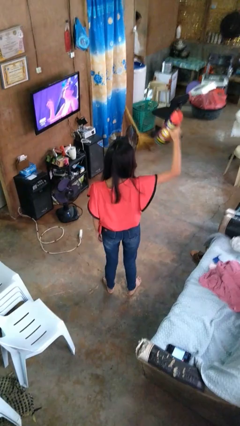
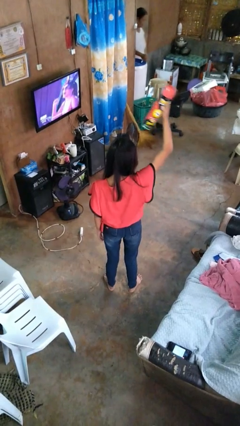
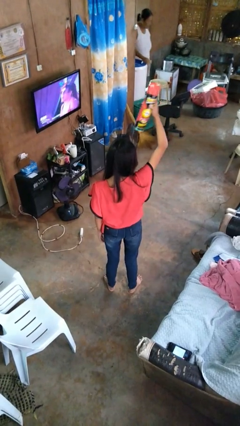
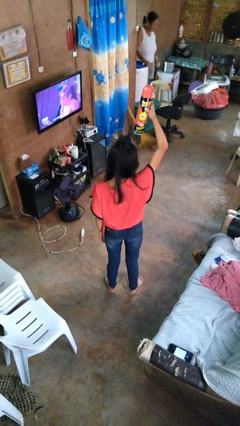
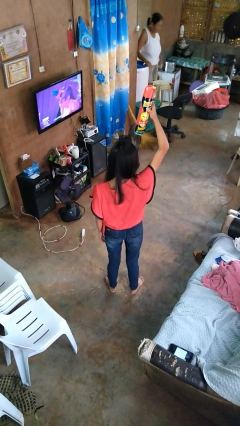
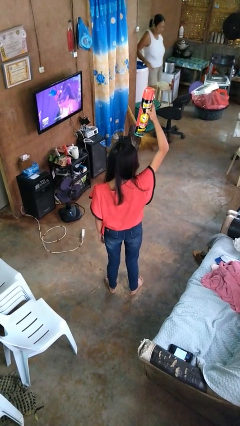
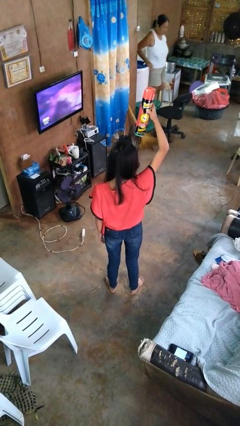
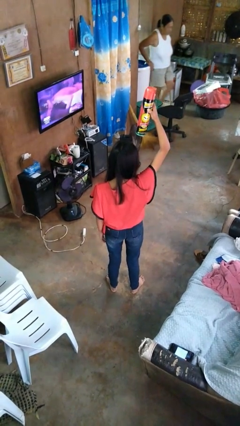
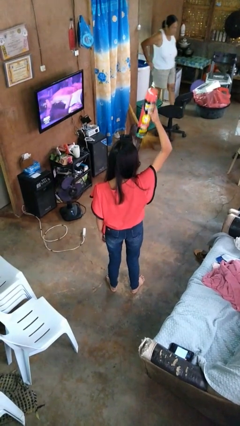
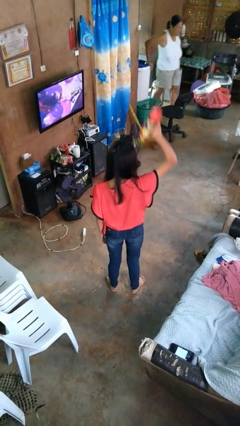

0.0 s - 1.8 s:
person holds object above head

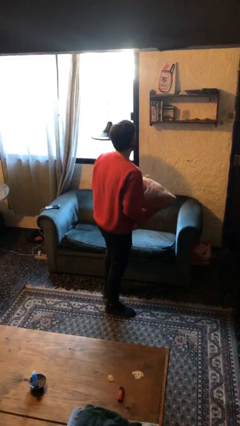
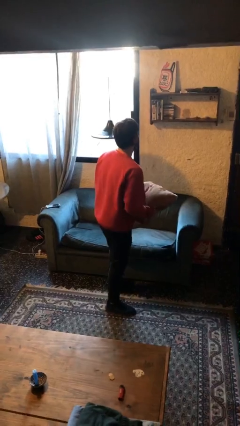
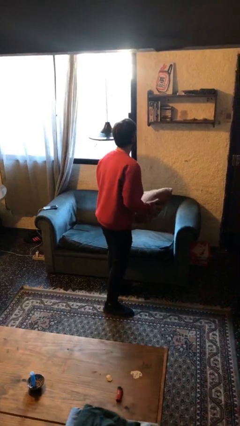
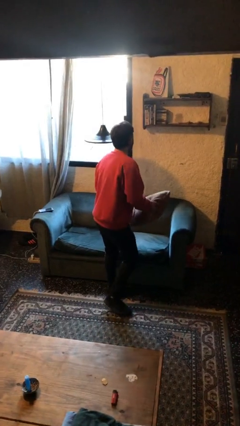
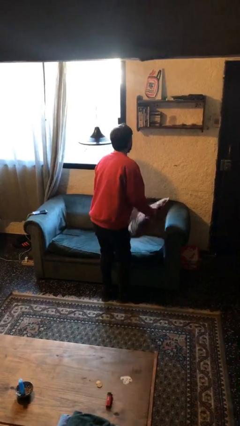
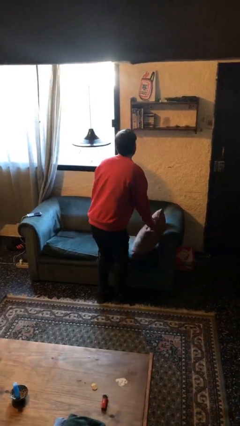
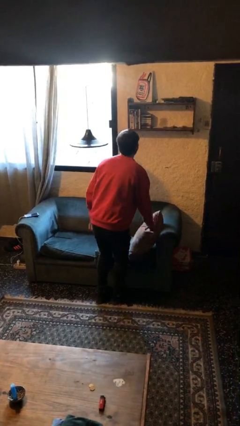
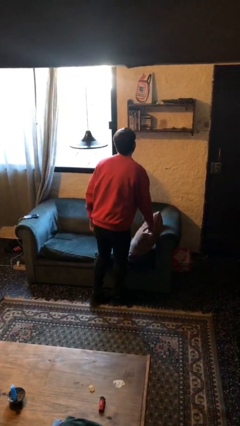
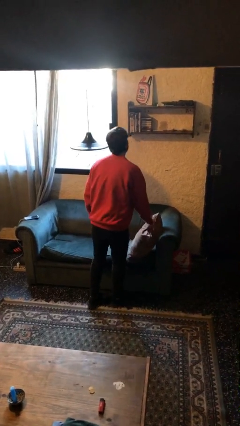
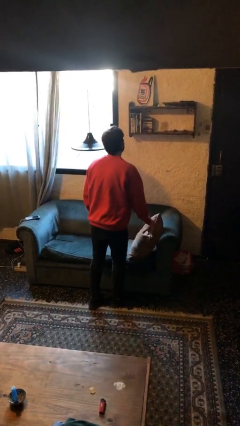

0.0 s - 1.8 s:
person puts down object on couch

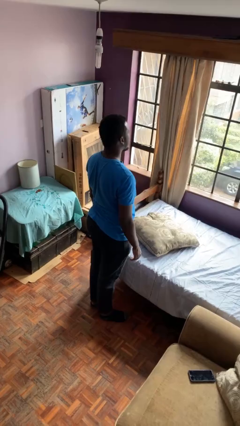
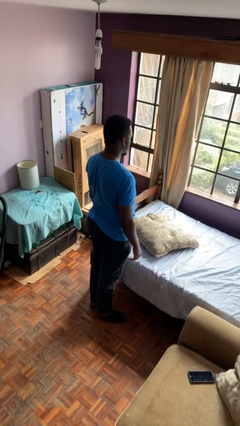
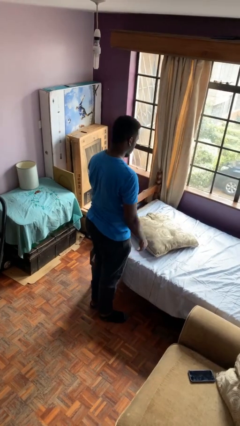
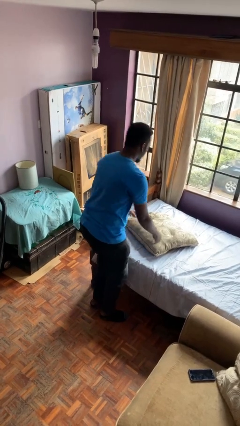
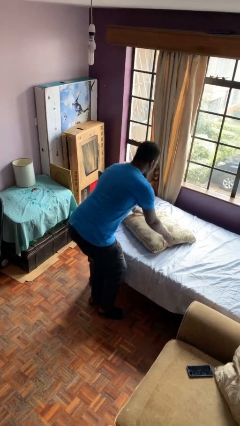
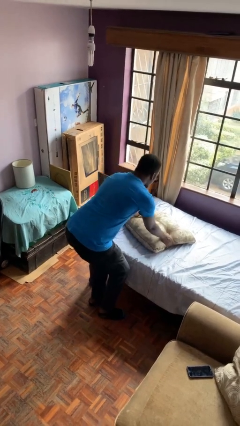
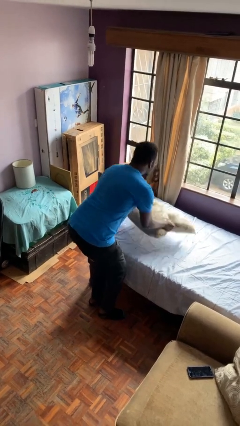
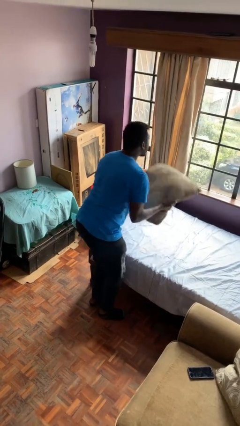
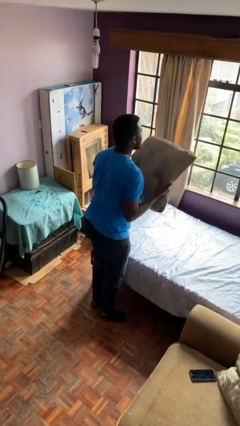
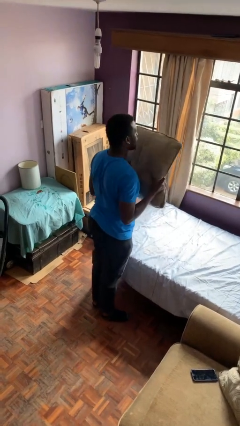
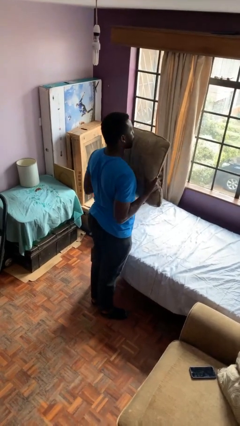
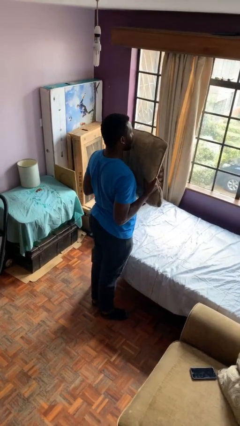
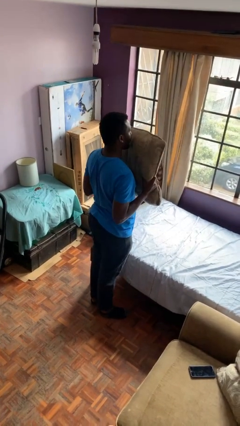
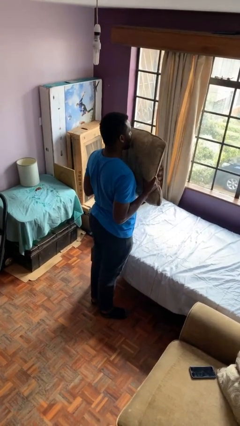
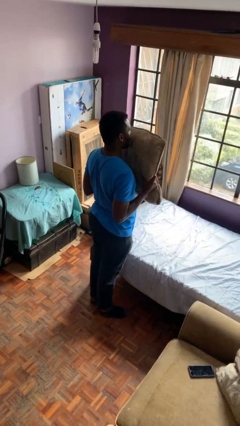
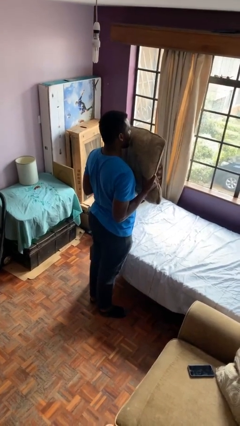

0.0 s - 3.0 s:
person picks up object from bed

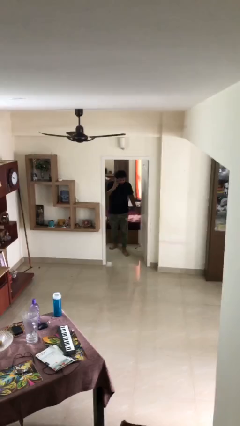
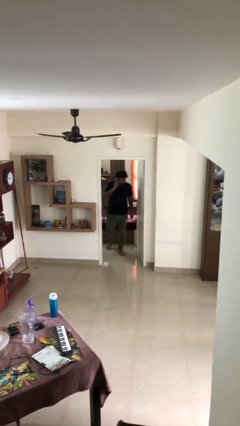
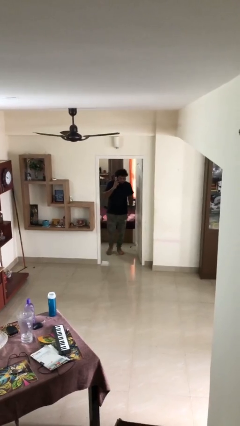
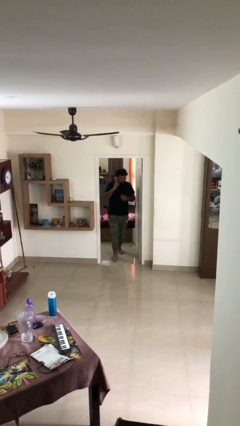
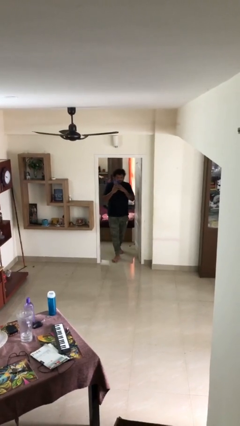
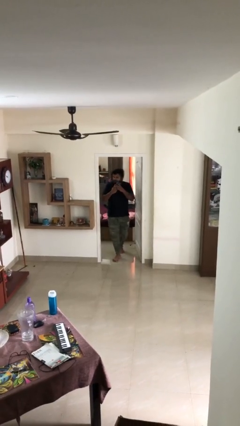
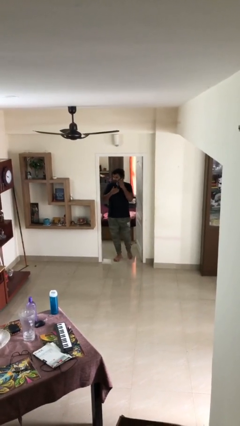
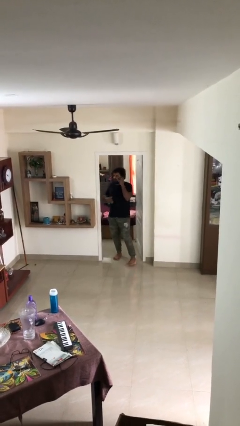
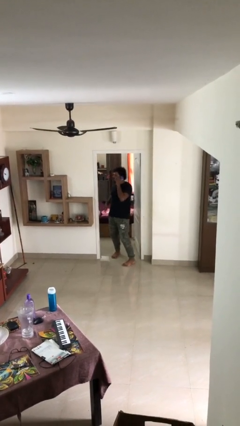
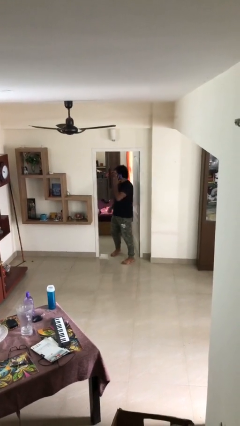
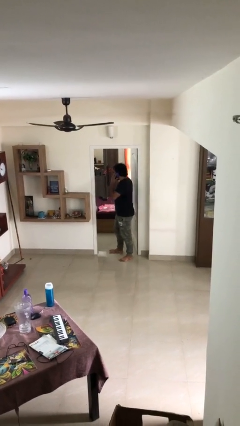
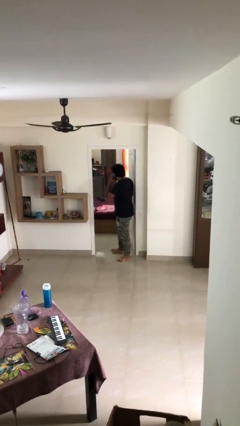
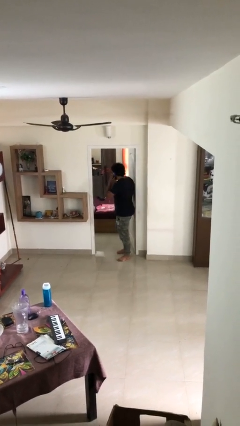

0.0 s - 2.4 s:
person enters scene through structure

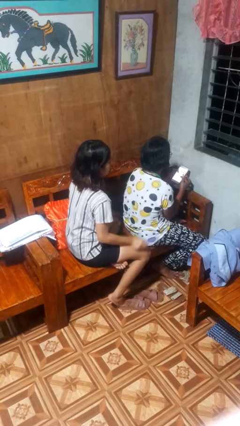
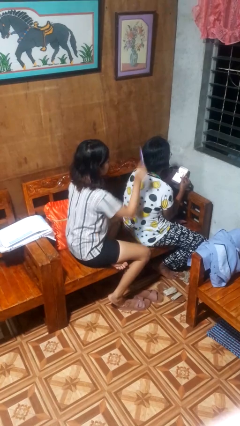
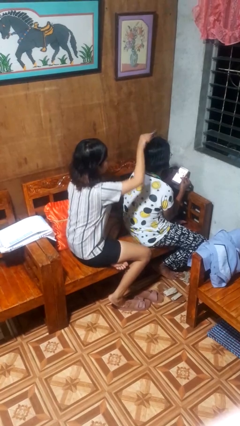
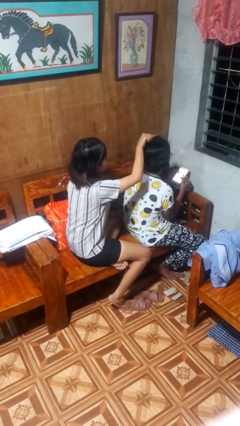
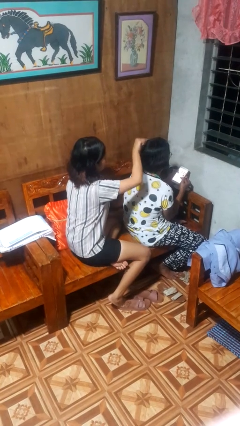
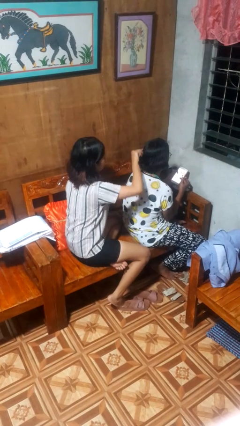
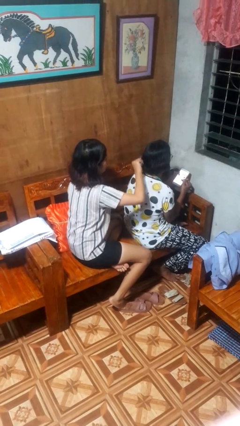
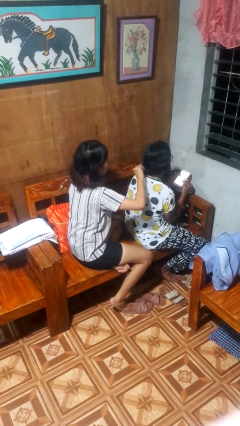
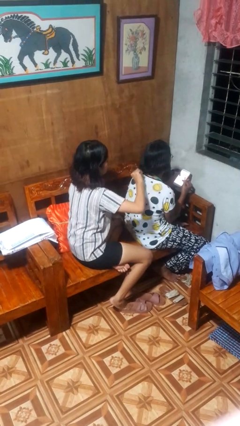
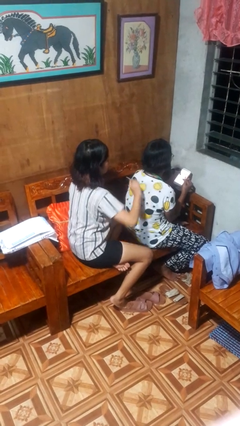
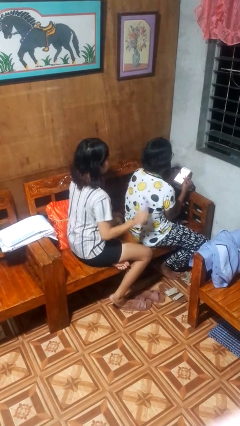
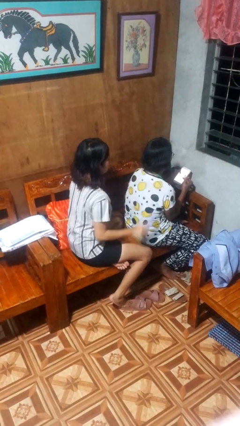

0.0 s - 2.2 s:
person brushes hair of person

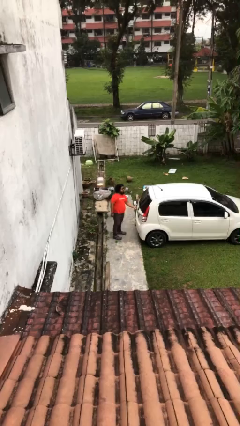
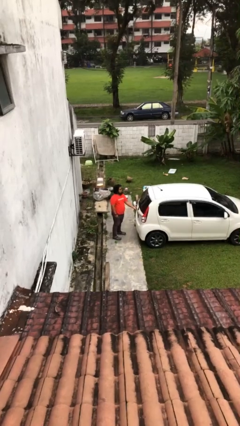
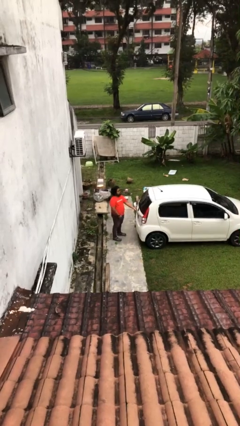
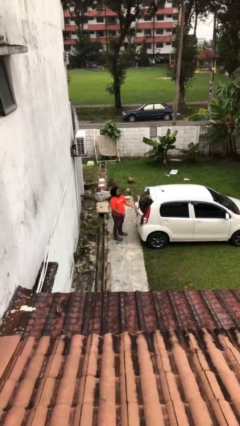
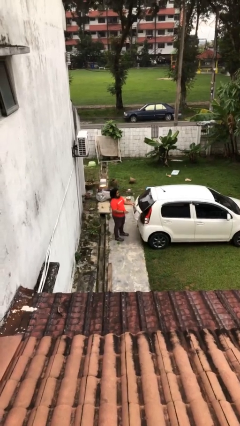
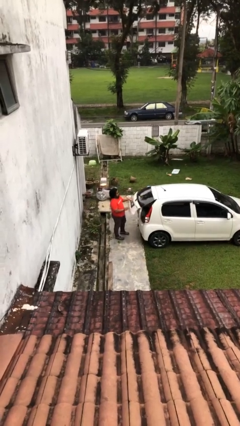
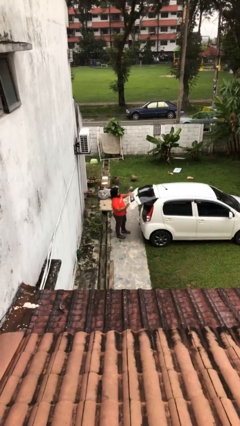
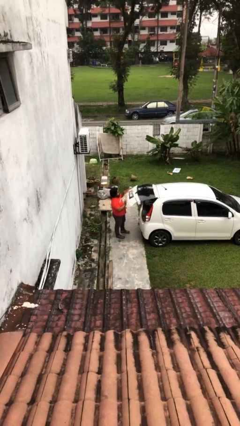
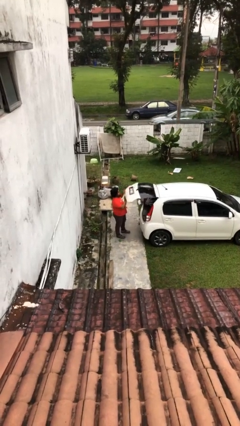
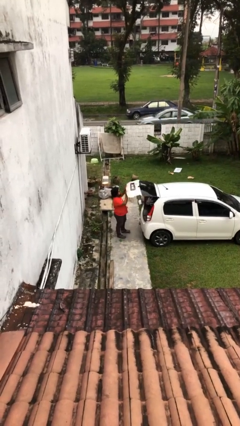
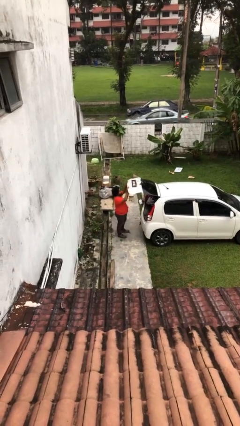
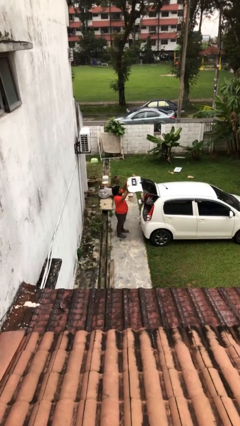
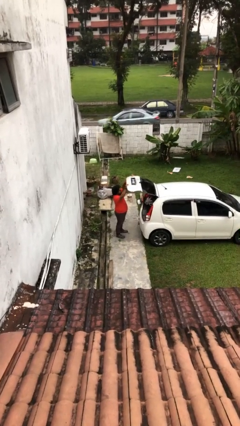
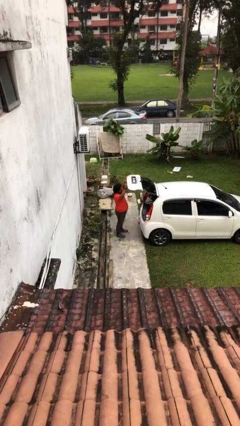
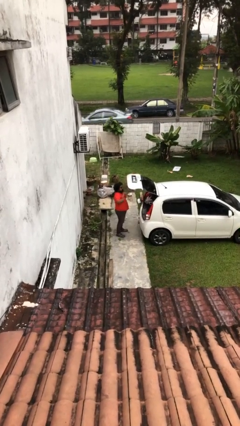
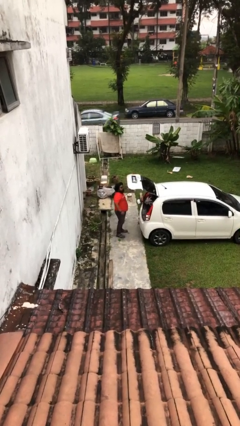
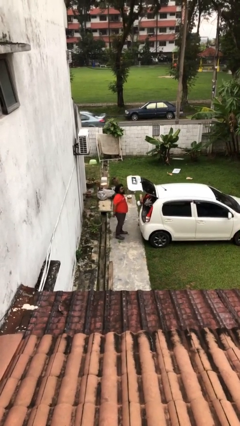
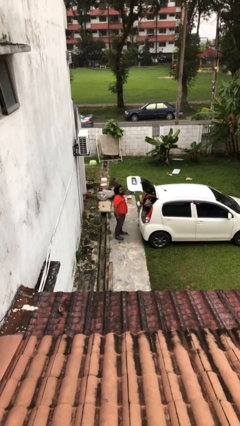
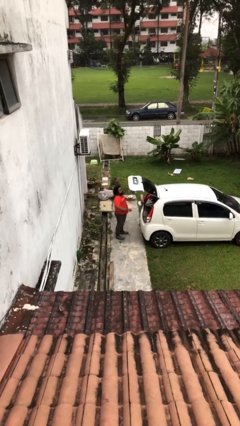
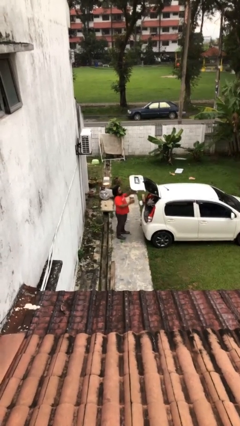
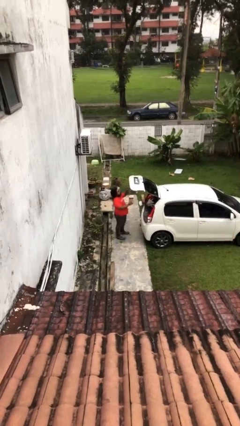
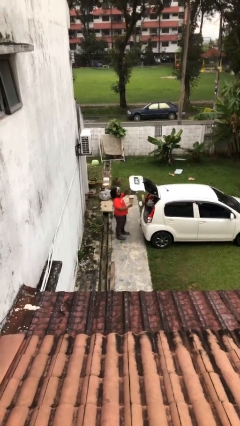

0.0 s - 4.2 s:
person opens car trunk

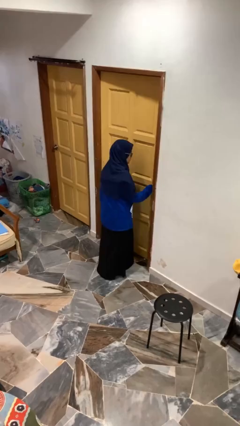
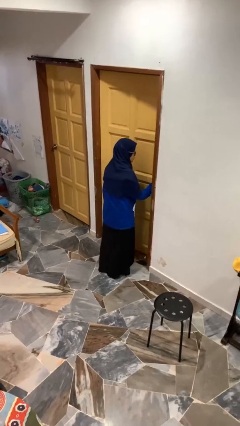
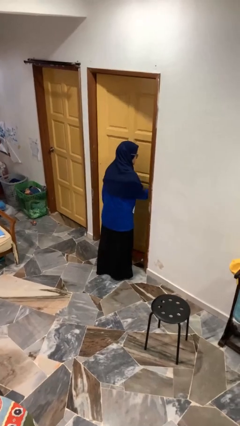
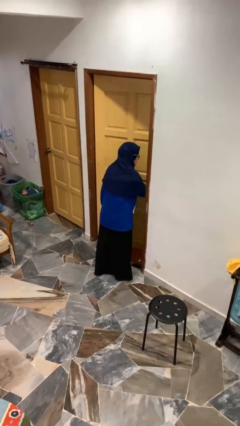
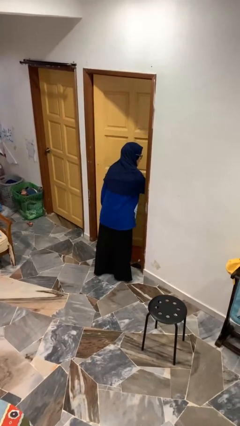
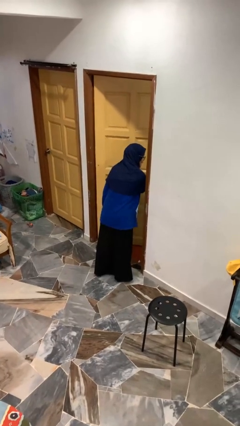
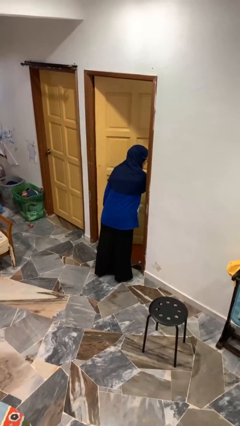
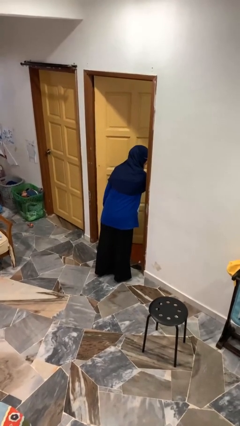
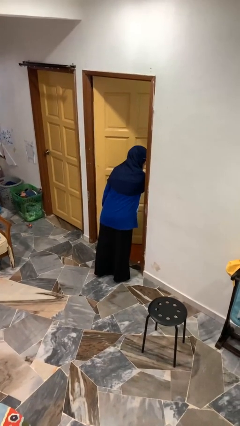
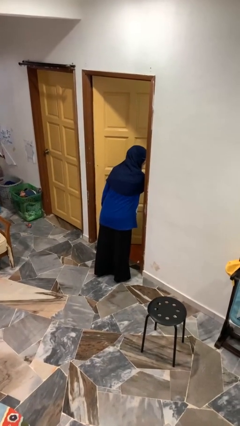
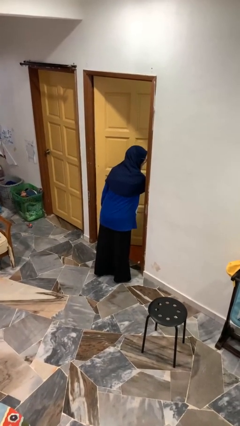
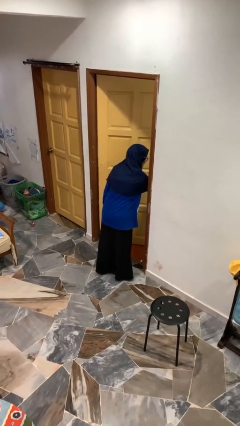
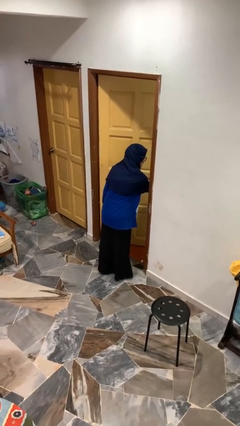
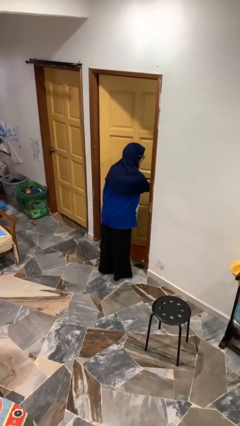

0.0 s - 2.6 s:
person opens facility door
